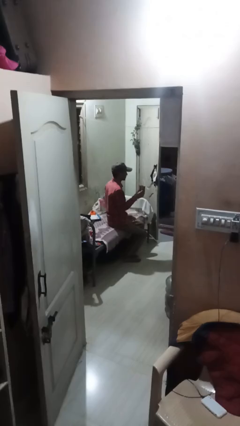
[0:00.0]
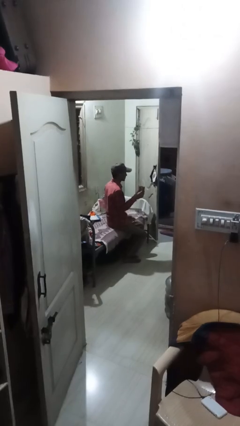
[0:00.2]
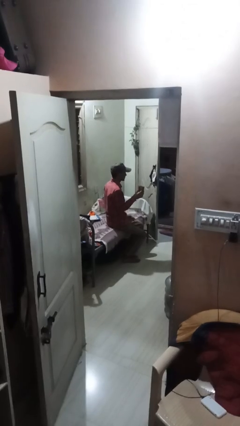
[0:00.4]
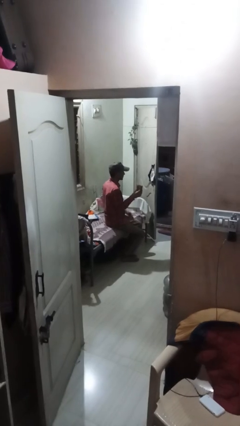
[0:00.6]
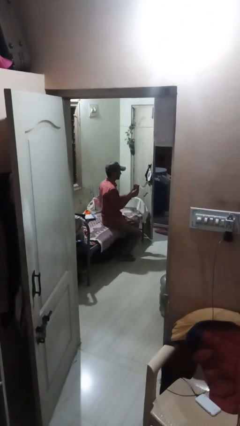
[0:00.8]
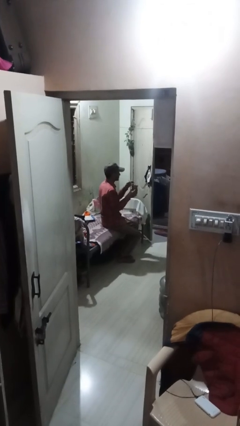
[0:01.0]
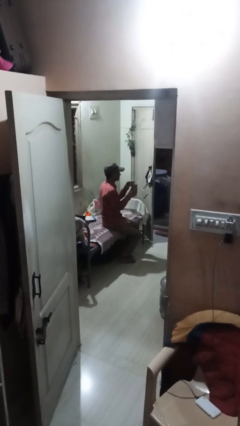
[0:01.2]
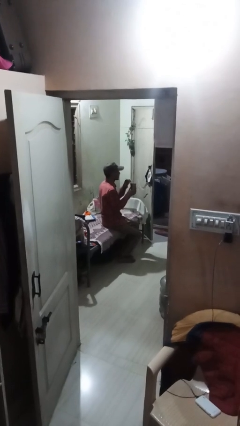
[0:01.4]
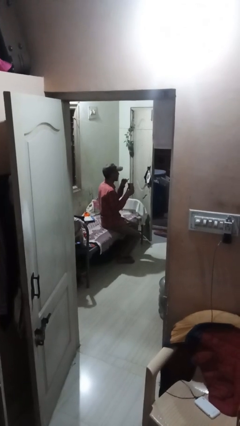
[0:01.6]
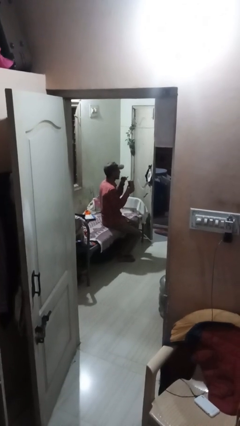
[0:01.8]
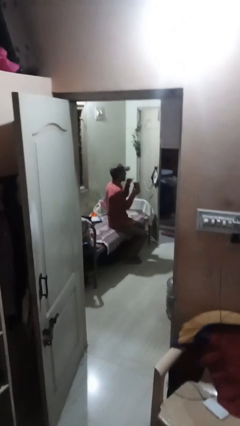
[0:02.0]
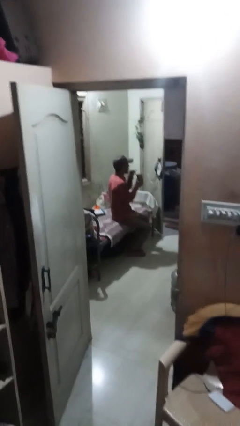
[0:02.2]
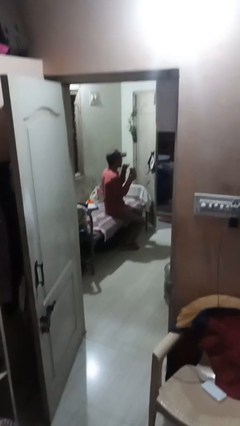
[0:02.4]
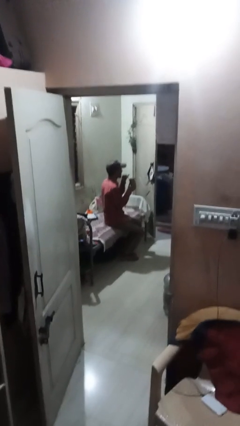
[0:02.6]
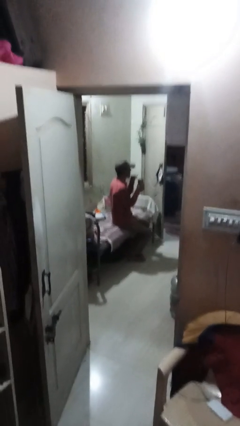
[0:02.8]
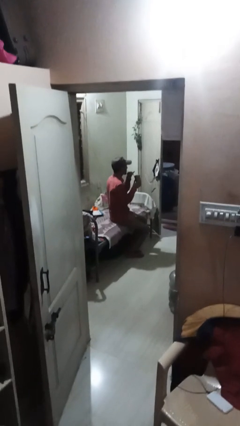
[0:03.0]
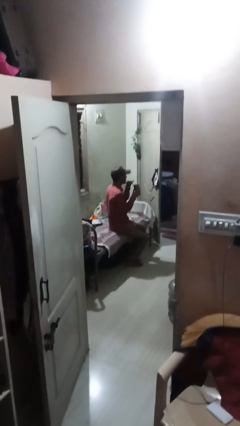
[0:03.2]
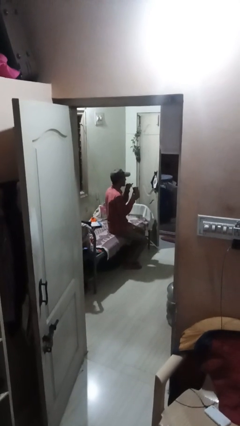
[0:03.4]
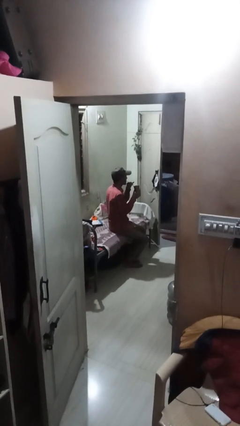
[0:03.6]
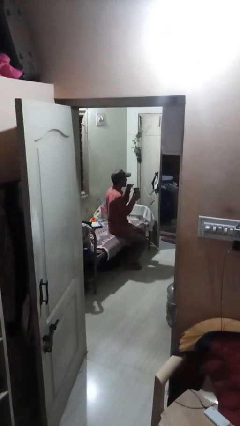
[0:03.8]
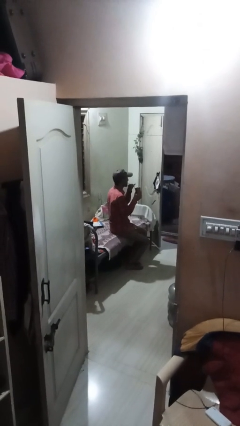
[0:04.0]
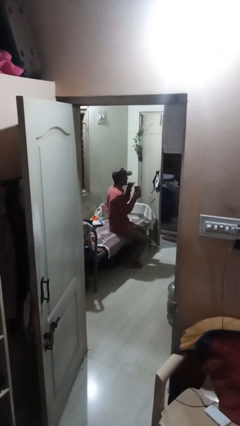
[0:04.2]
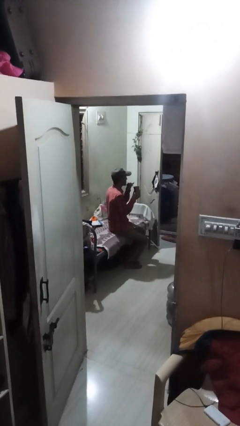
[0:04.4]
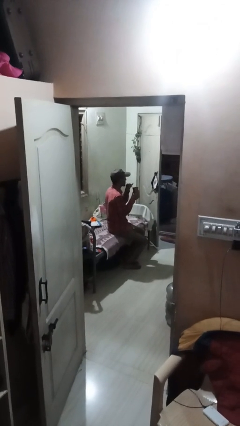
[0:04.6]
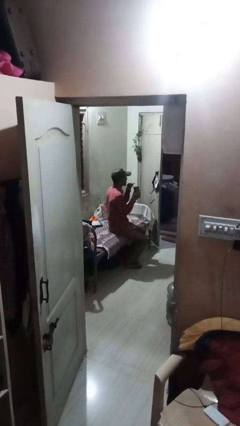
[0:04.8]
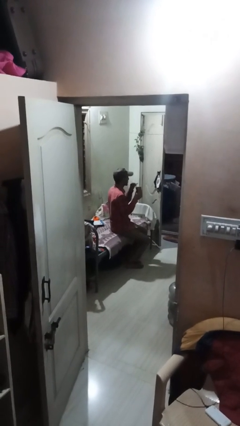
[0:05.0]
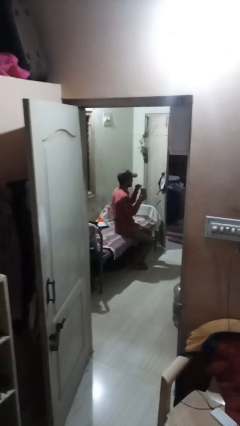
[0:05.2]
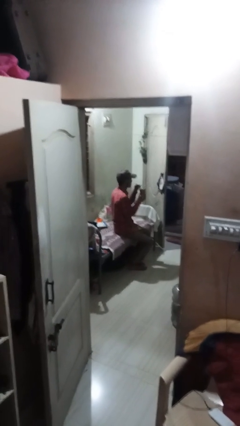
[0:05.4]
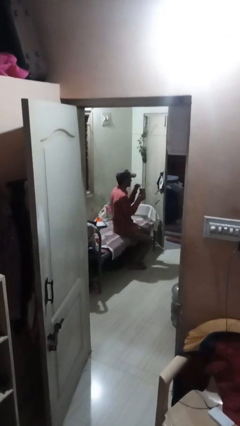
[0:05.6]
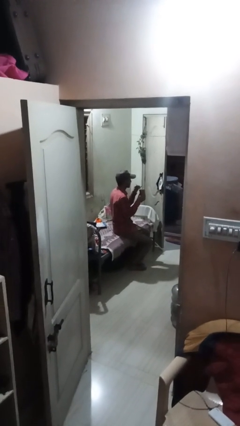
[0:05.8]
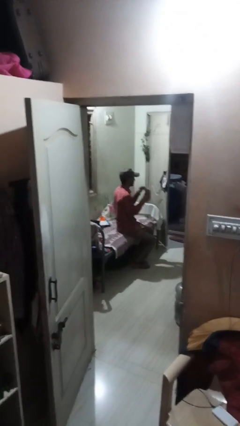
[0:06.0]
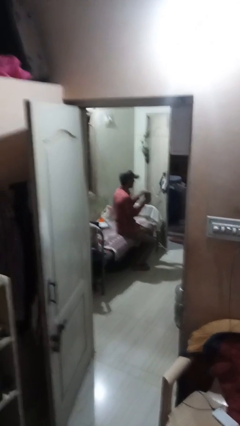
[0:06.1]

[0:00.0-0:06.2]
person drinks from straw

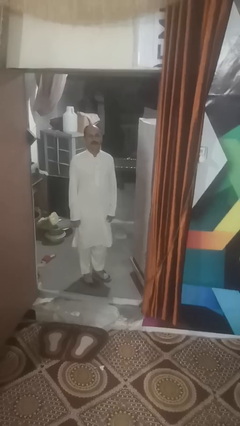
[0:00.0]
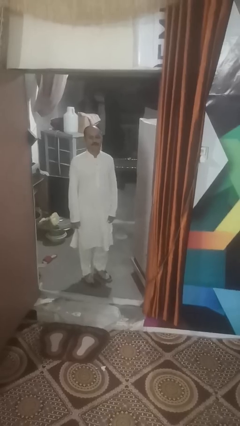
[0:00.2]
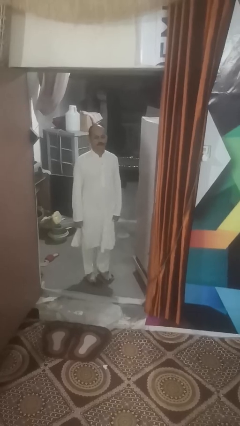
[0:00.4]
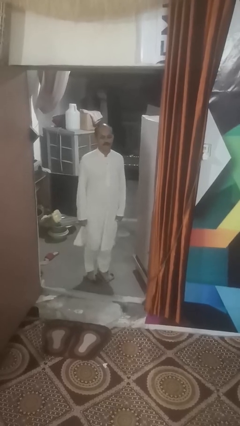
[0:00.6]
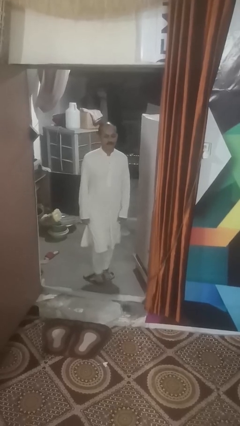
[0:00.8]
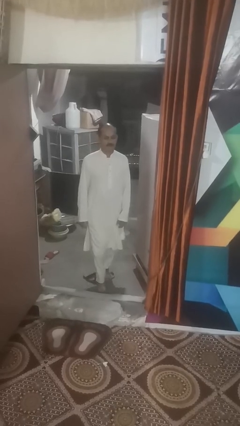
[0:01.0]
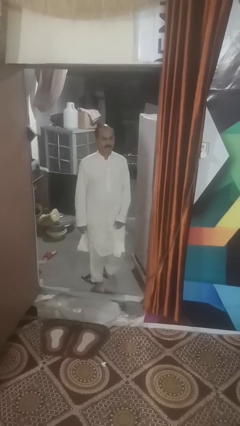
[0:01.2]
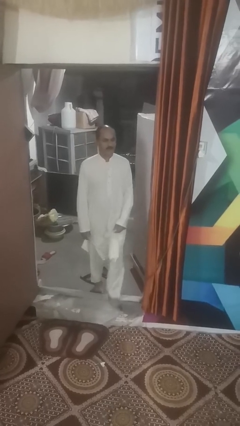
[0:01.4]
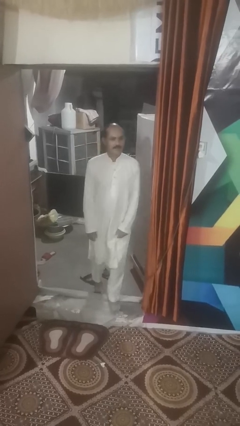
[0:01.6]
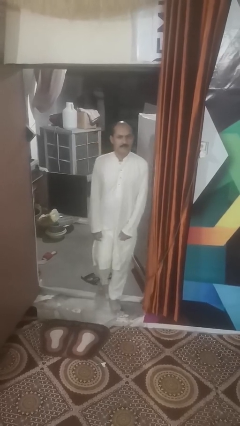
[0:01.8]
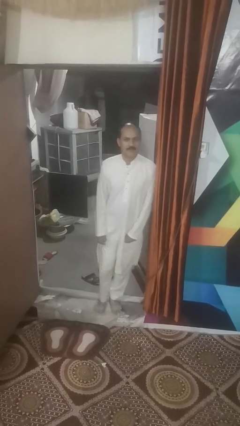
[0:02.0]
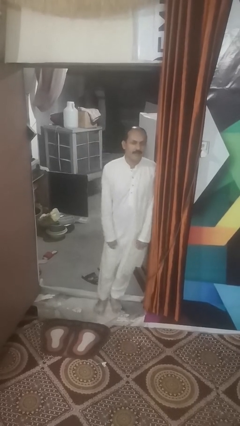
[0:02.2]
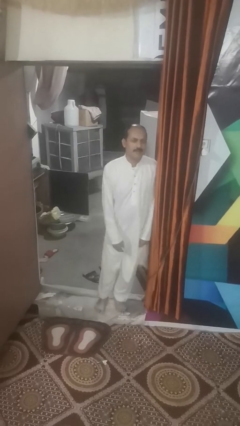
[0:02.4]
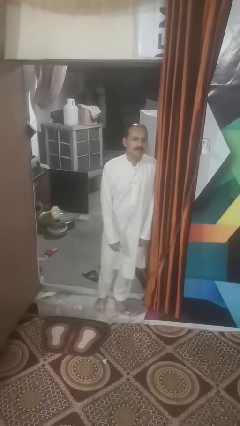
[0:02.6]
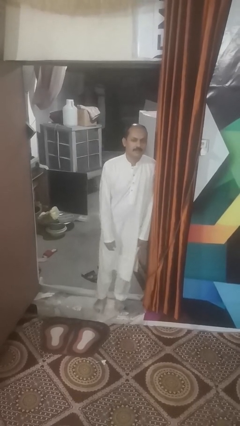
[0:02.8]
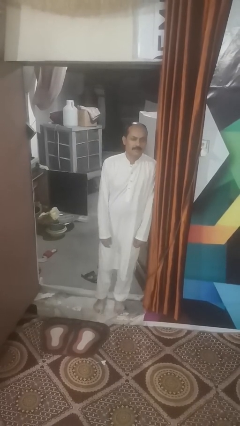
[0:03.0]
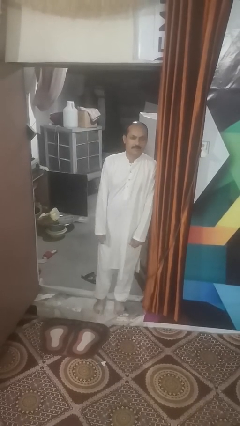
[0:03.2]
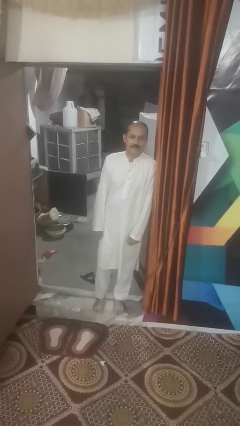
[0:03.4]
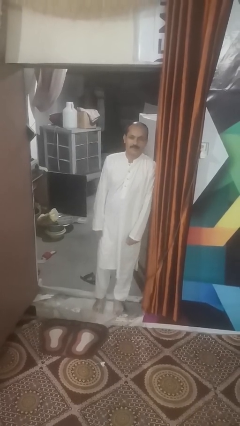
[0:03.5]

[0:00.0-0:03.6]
person bumps into wall

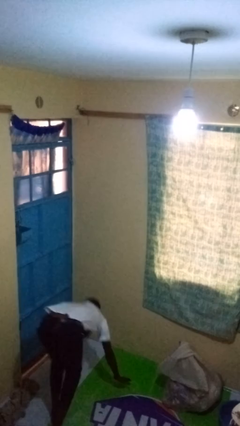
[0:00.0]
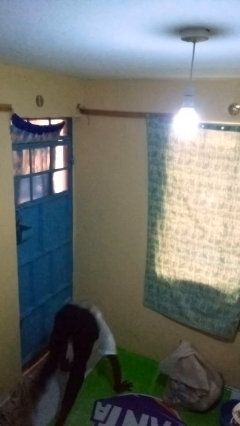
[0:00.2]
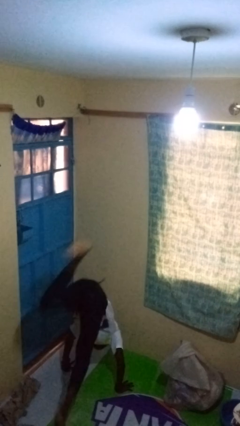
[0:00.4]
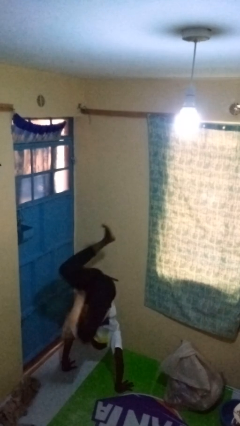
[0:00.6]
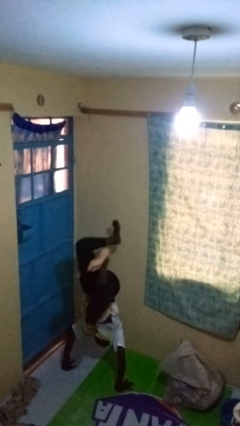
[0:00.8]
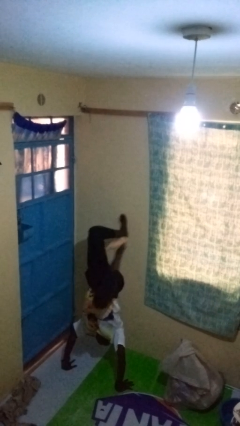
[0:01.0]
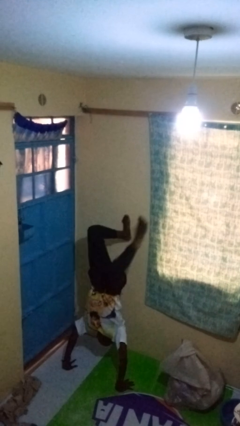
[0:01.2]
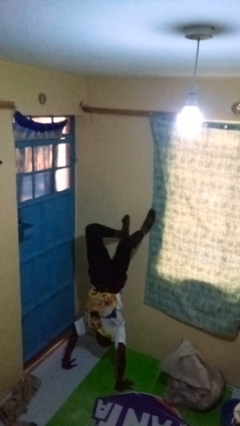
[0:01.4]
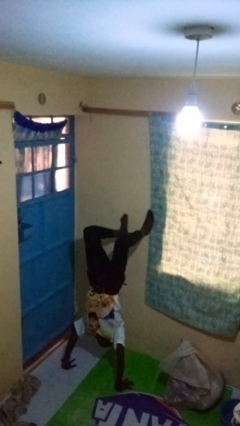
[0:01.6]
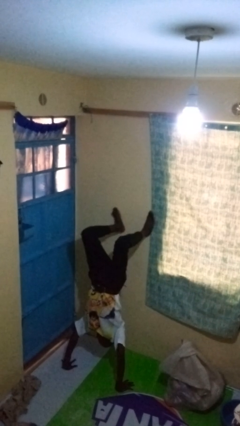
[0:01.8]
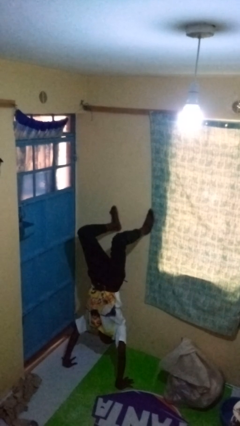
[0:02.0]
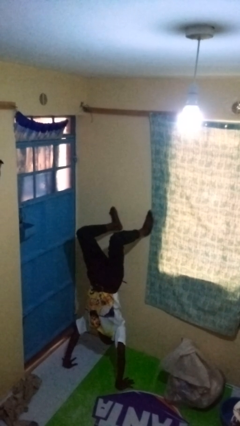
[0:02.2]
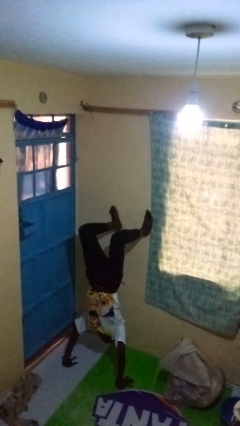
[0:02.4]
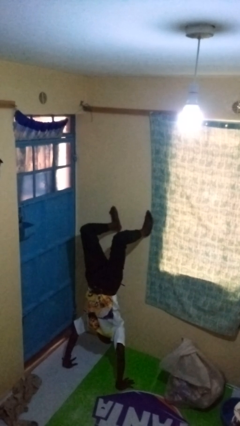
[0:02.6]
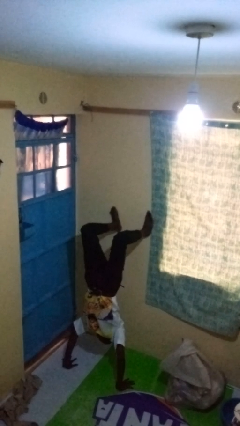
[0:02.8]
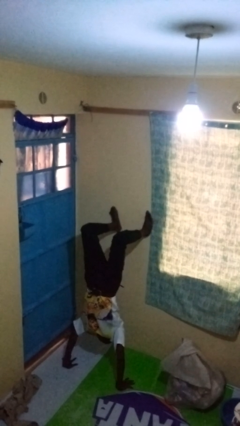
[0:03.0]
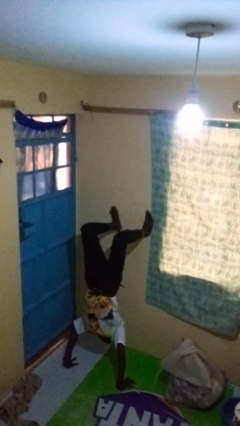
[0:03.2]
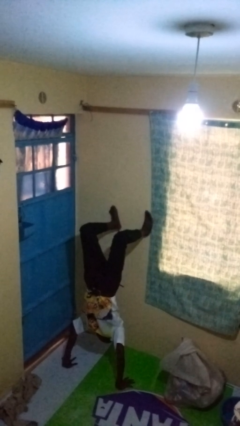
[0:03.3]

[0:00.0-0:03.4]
person handstand

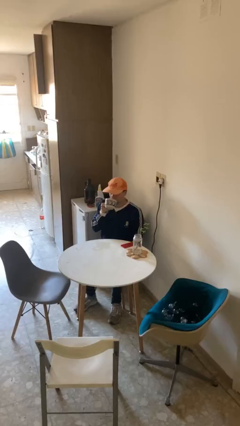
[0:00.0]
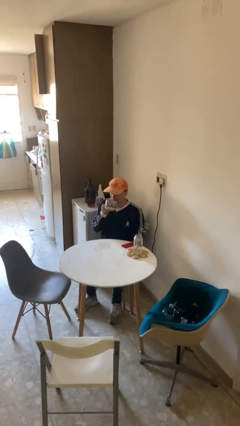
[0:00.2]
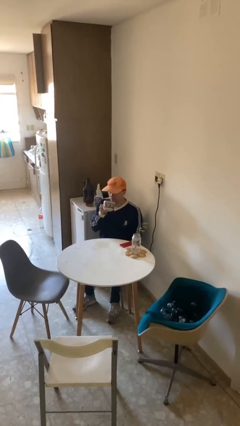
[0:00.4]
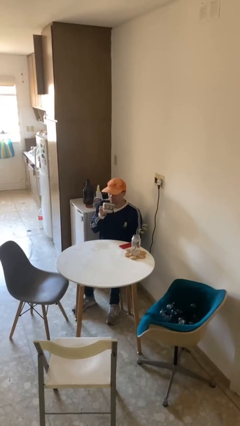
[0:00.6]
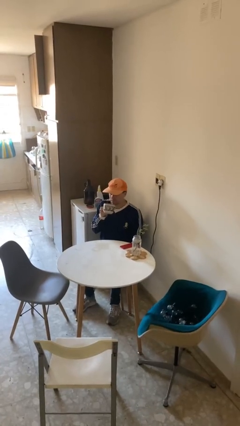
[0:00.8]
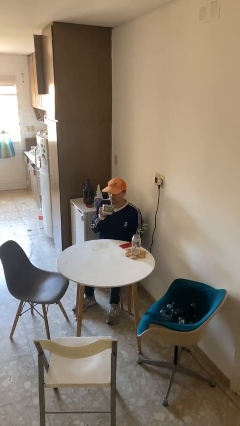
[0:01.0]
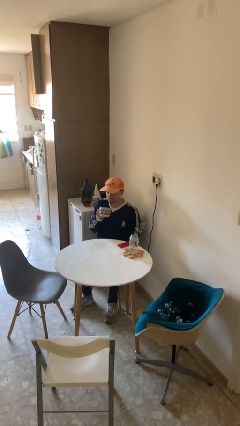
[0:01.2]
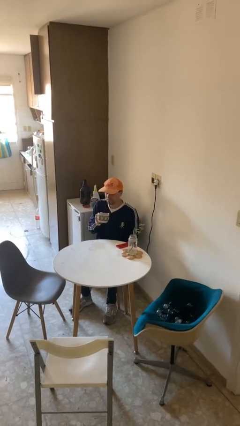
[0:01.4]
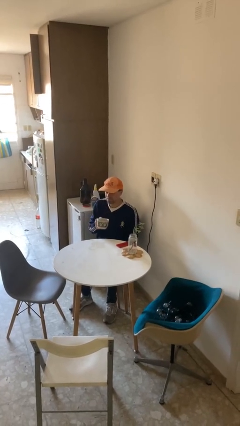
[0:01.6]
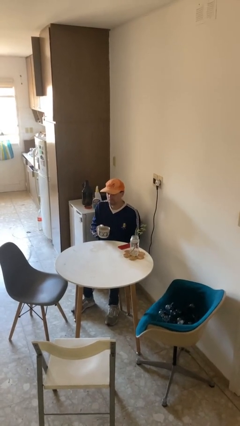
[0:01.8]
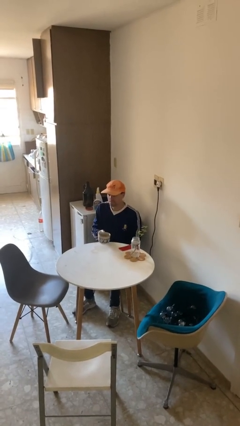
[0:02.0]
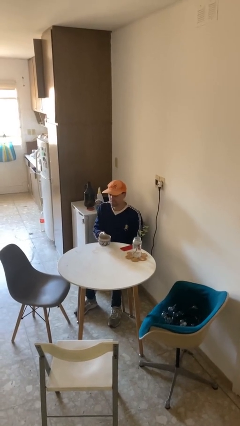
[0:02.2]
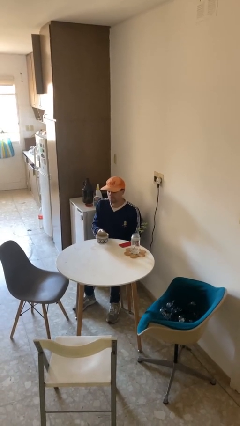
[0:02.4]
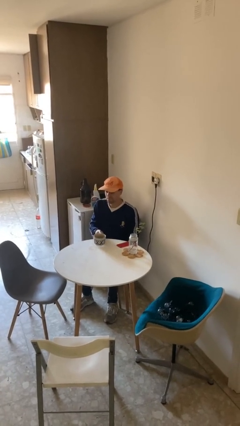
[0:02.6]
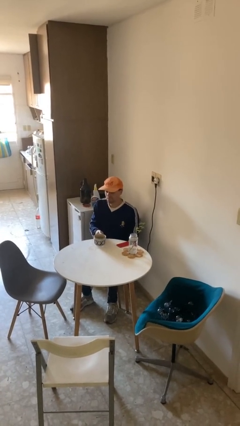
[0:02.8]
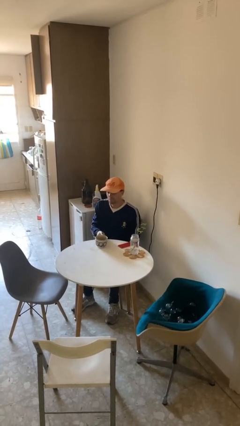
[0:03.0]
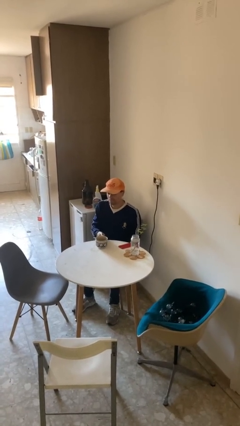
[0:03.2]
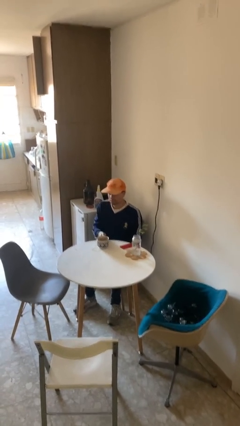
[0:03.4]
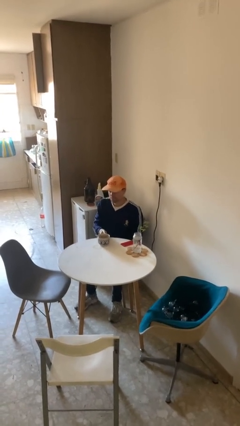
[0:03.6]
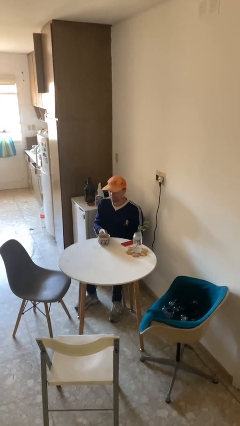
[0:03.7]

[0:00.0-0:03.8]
person puts down object on table

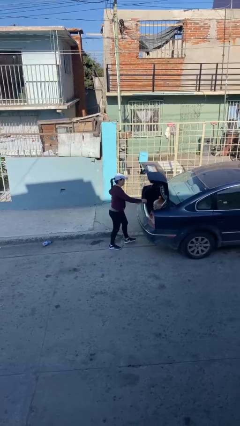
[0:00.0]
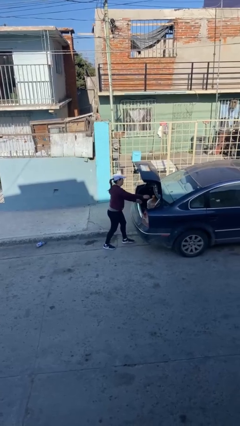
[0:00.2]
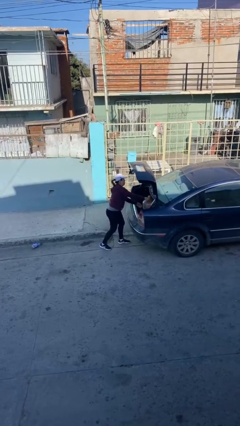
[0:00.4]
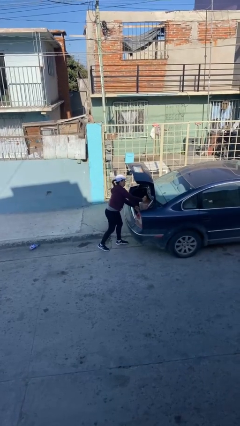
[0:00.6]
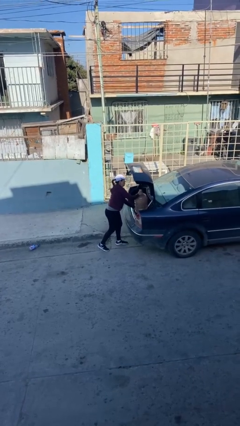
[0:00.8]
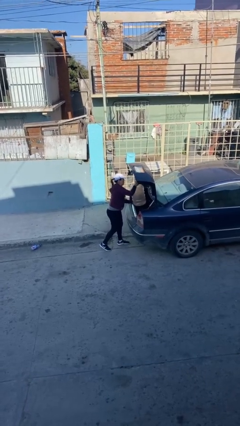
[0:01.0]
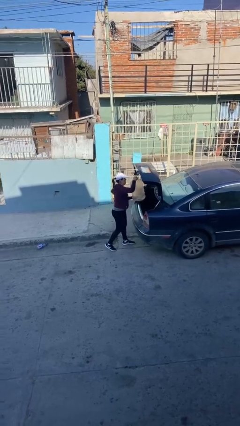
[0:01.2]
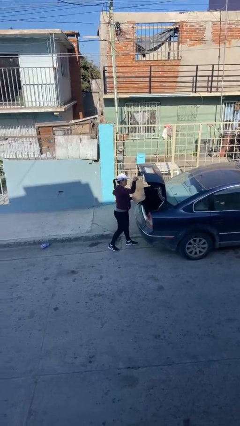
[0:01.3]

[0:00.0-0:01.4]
person unloads car
